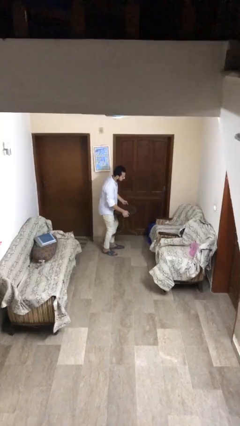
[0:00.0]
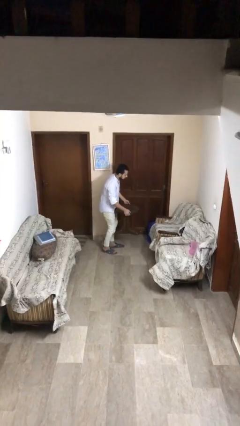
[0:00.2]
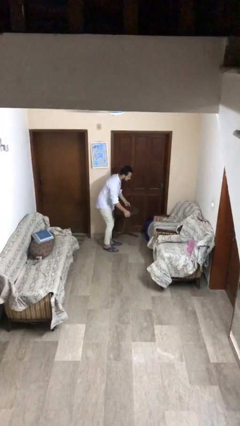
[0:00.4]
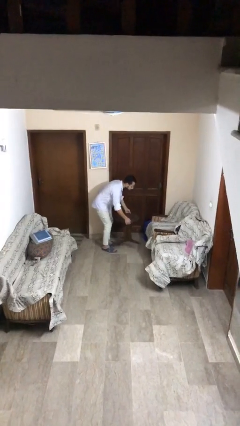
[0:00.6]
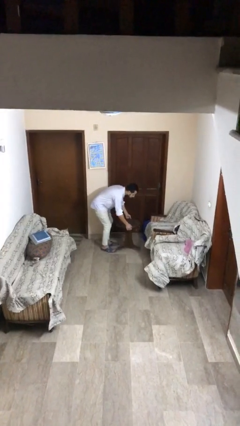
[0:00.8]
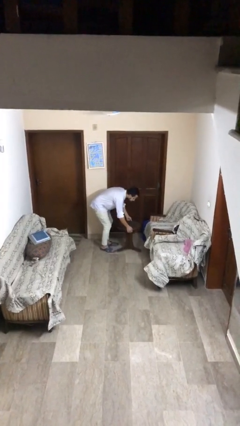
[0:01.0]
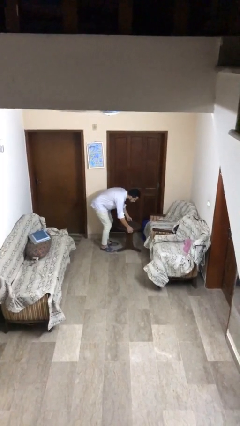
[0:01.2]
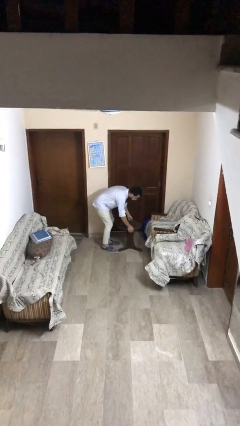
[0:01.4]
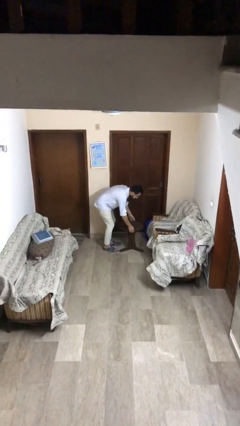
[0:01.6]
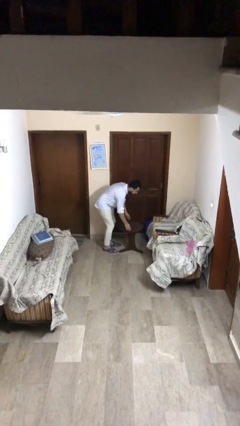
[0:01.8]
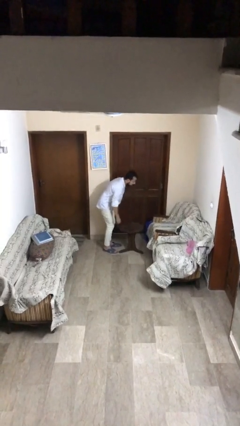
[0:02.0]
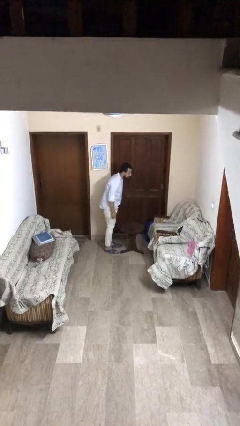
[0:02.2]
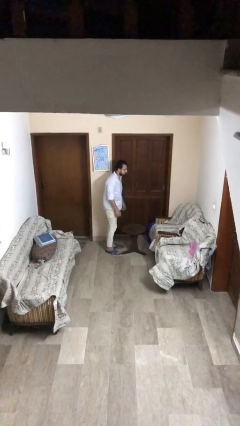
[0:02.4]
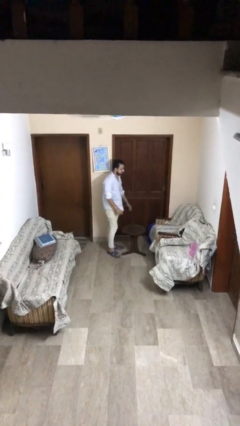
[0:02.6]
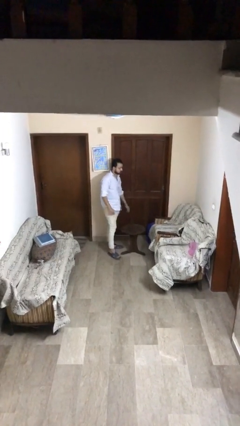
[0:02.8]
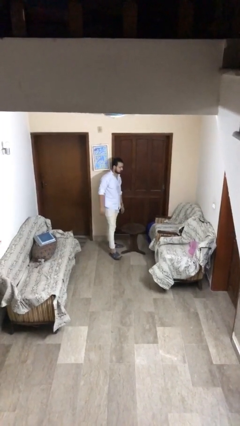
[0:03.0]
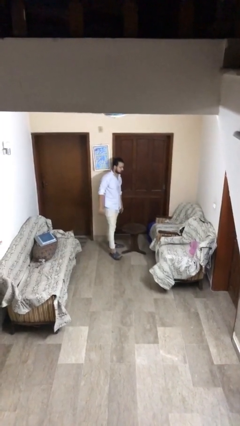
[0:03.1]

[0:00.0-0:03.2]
person puts down object on floor

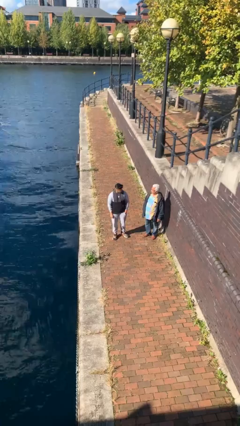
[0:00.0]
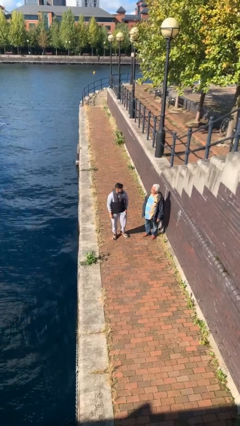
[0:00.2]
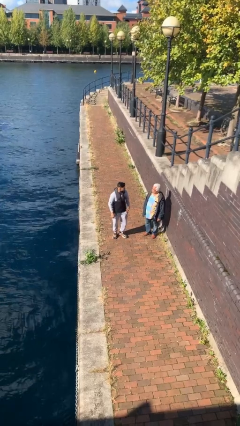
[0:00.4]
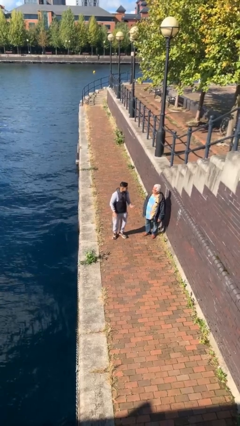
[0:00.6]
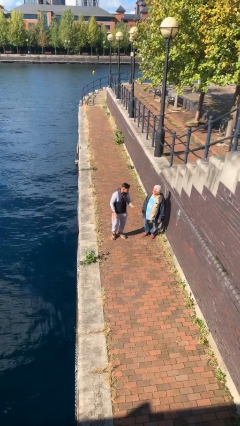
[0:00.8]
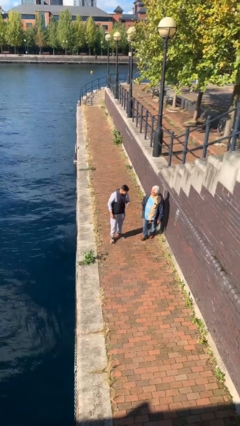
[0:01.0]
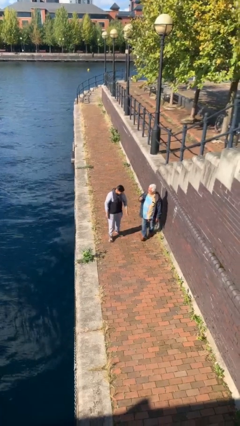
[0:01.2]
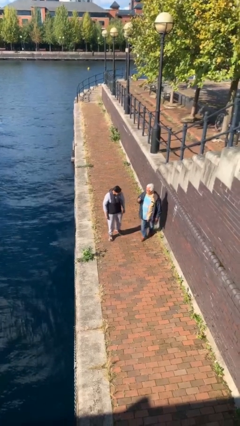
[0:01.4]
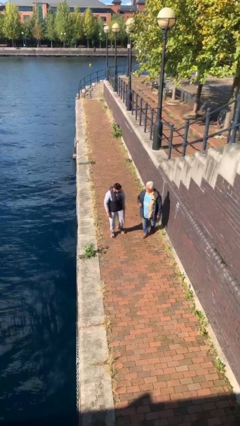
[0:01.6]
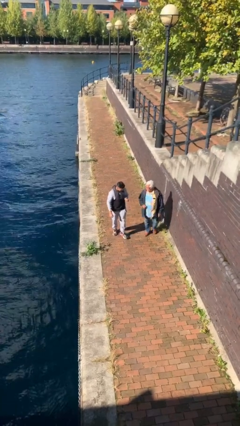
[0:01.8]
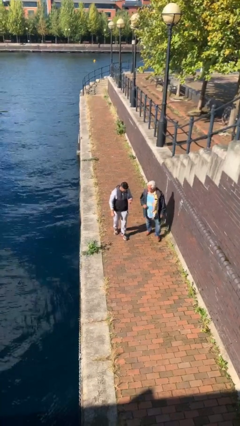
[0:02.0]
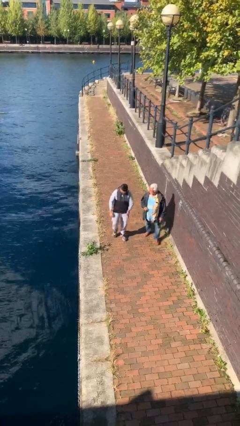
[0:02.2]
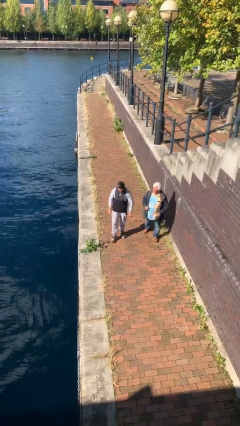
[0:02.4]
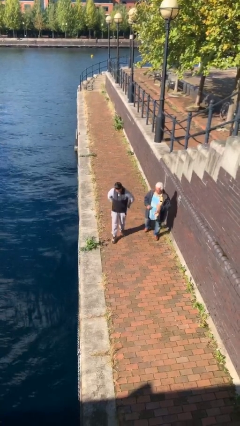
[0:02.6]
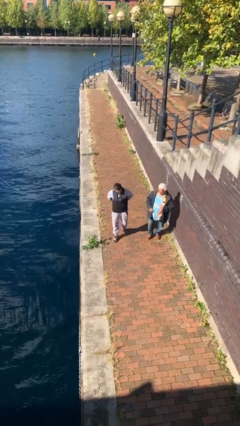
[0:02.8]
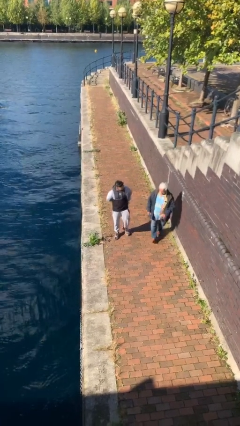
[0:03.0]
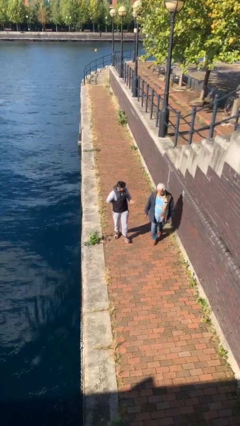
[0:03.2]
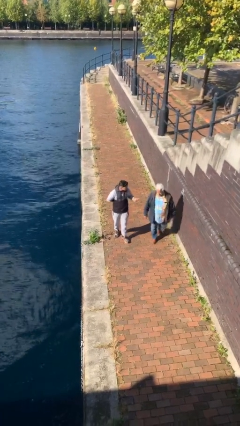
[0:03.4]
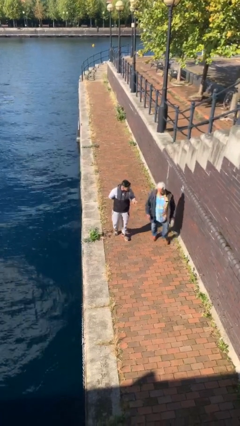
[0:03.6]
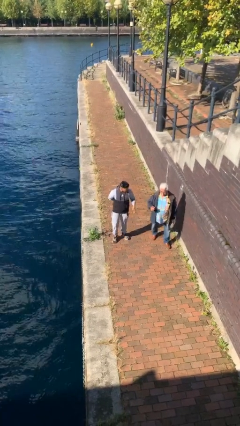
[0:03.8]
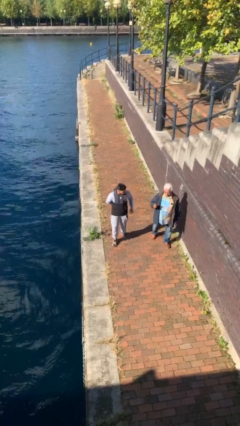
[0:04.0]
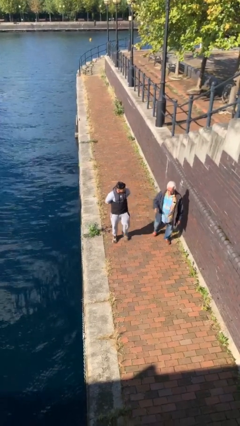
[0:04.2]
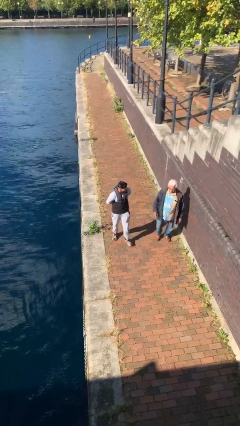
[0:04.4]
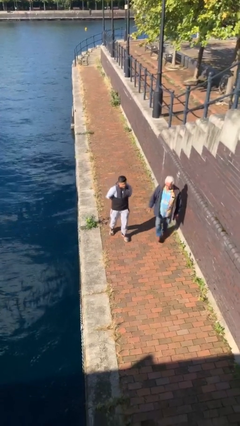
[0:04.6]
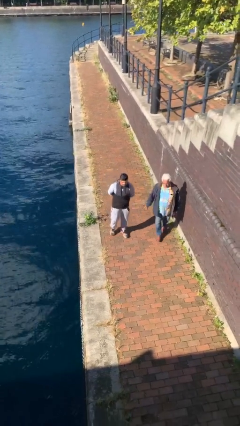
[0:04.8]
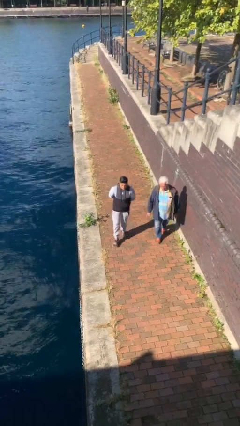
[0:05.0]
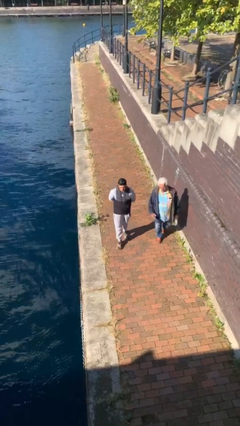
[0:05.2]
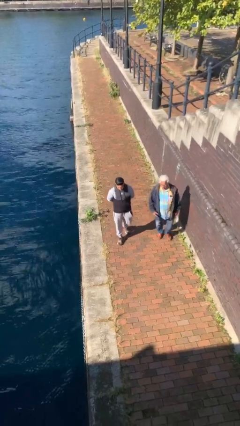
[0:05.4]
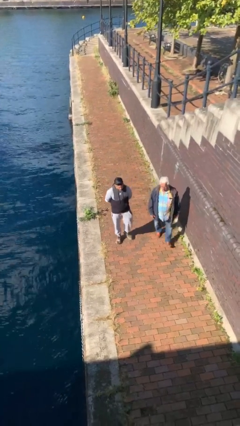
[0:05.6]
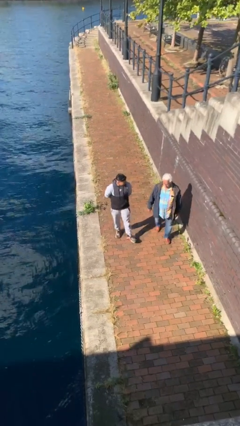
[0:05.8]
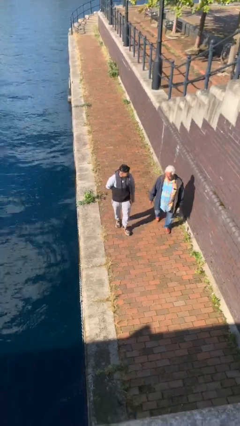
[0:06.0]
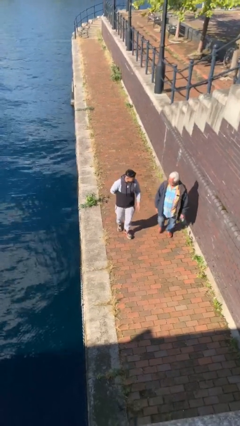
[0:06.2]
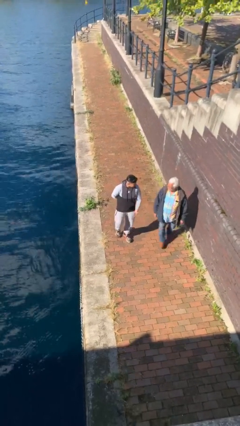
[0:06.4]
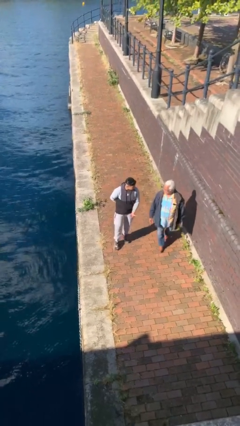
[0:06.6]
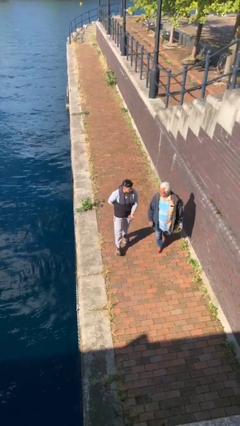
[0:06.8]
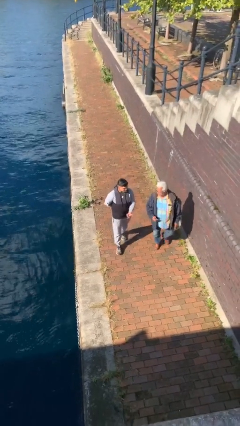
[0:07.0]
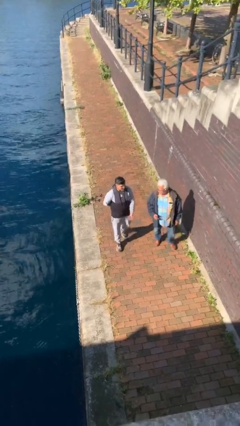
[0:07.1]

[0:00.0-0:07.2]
person talks to person

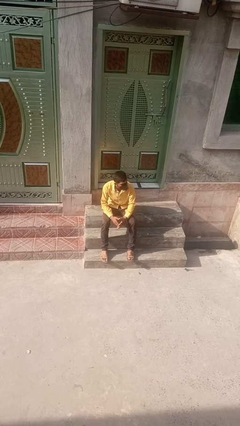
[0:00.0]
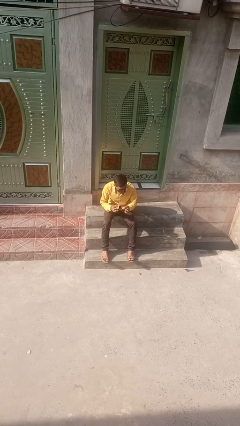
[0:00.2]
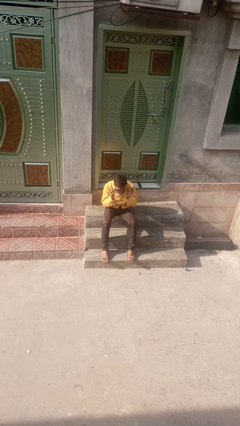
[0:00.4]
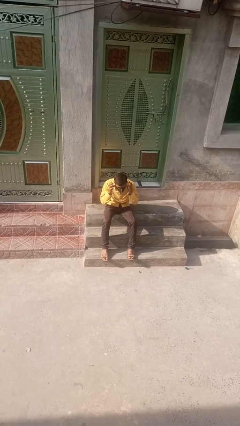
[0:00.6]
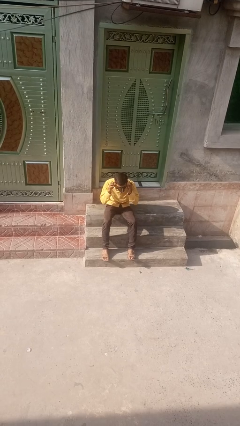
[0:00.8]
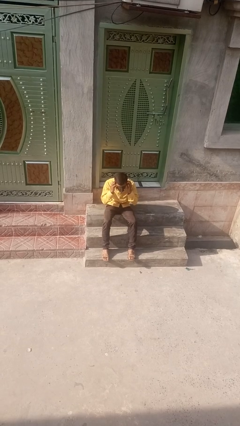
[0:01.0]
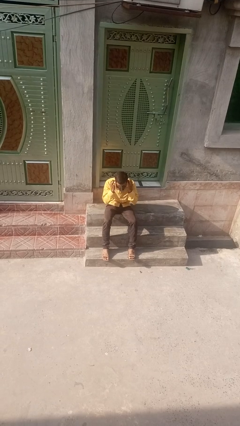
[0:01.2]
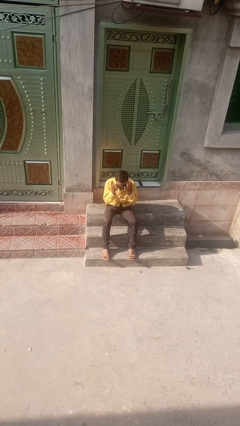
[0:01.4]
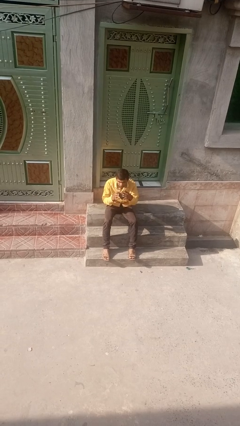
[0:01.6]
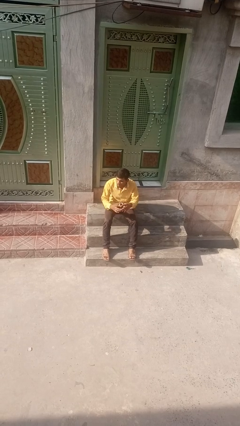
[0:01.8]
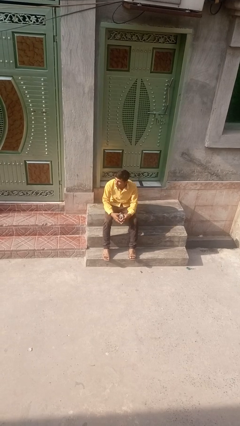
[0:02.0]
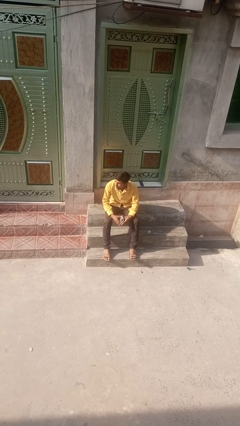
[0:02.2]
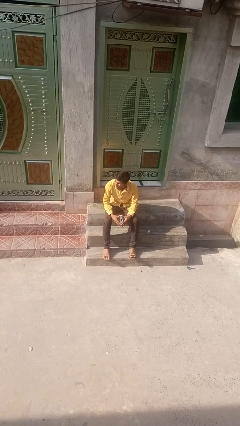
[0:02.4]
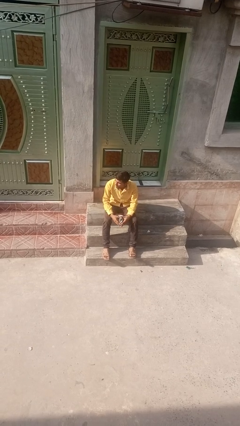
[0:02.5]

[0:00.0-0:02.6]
person takes off facemask

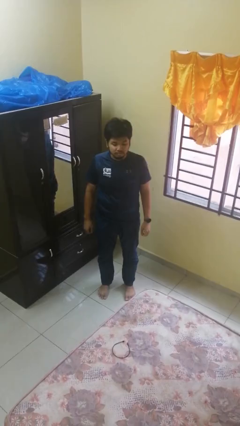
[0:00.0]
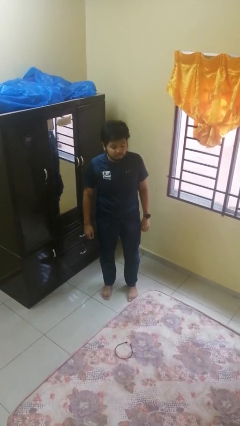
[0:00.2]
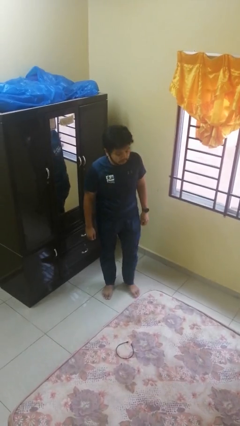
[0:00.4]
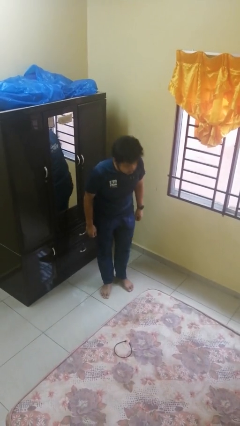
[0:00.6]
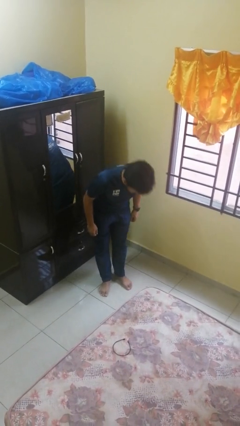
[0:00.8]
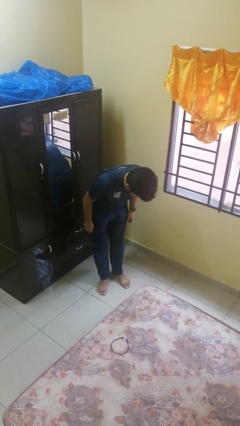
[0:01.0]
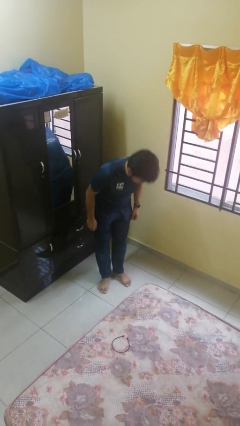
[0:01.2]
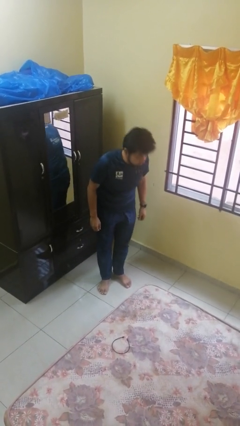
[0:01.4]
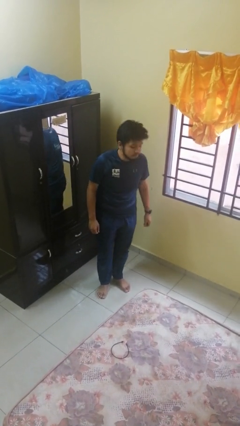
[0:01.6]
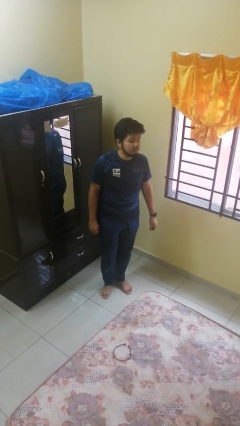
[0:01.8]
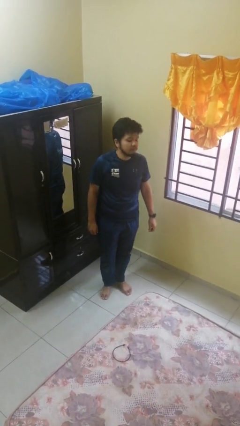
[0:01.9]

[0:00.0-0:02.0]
person bows

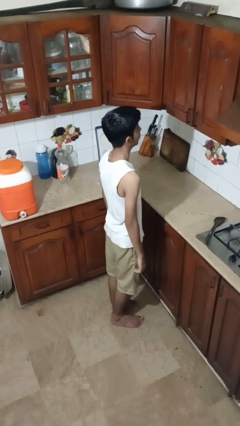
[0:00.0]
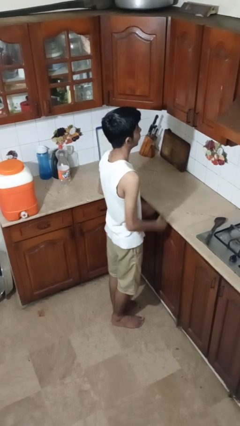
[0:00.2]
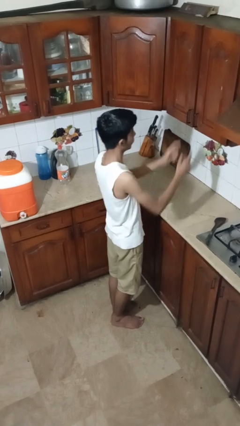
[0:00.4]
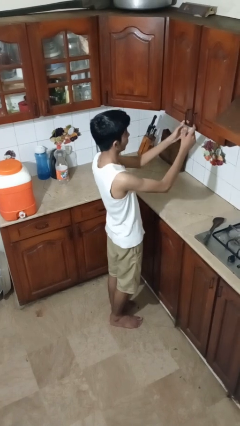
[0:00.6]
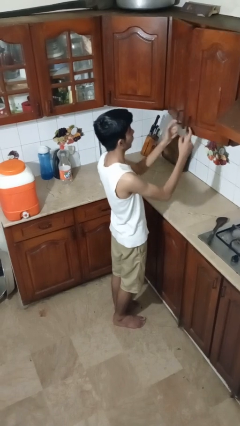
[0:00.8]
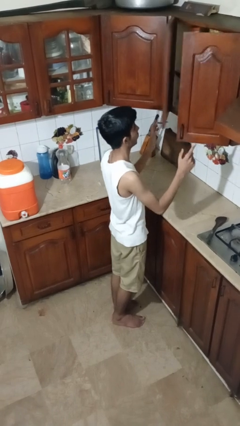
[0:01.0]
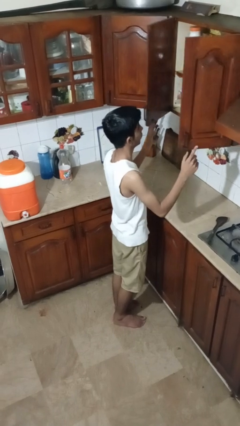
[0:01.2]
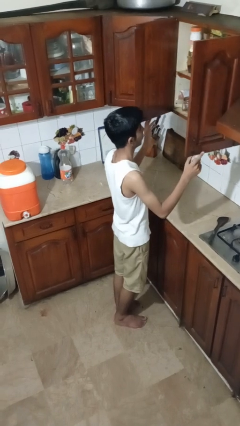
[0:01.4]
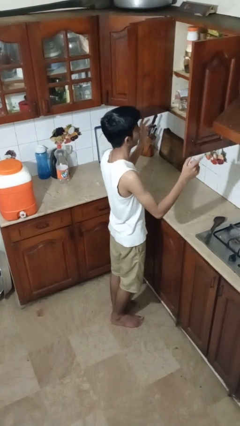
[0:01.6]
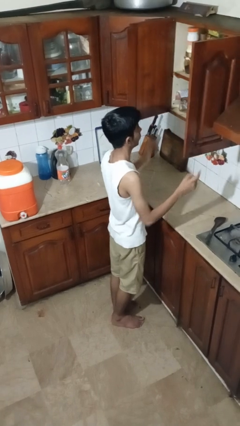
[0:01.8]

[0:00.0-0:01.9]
person opens cabinet

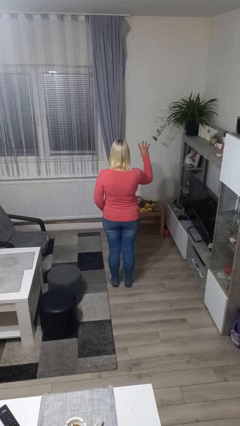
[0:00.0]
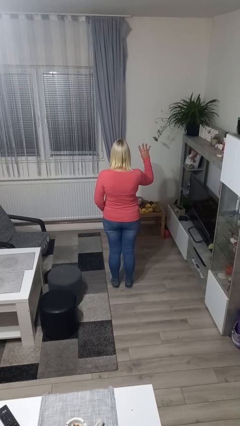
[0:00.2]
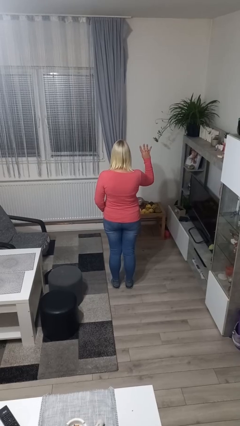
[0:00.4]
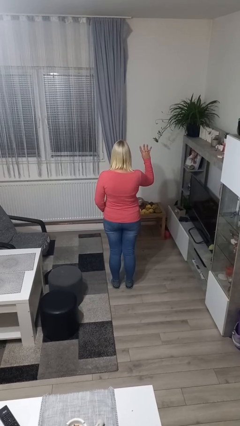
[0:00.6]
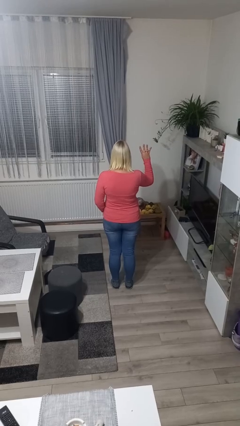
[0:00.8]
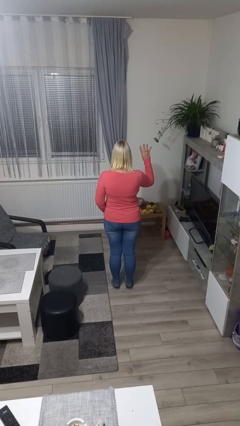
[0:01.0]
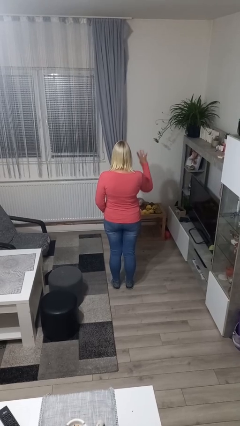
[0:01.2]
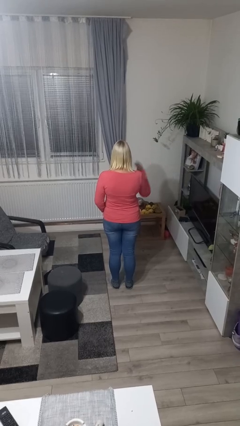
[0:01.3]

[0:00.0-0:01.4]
person gestures number four
